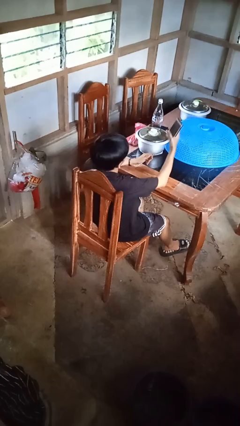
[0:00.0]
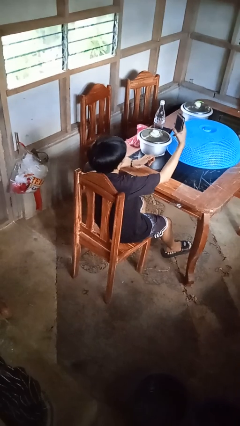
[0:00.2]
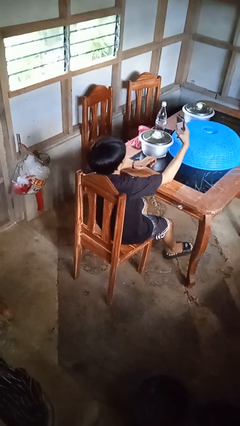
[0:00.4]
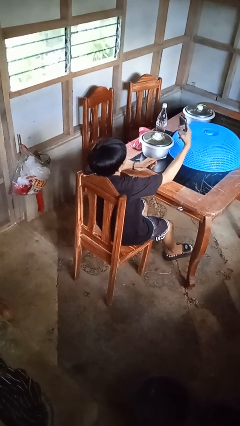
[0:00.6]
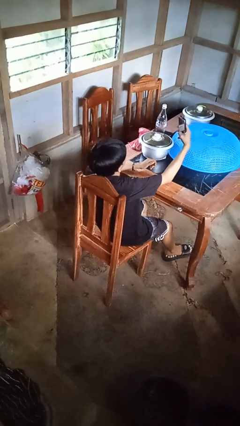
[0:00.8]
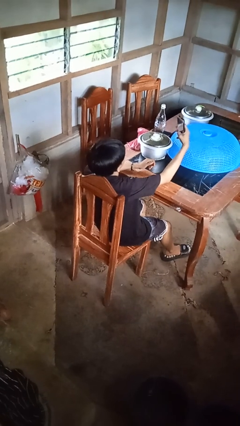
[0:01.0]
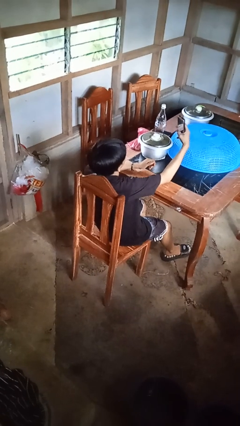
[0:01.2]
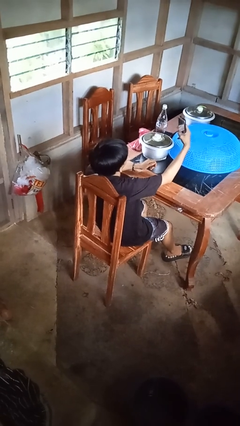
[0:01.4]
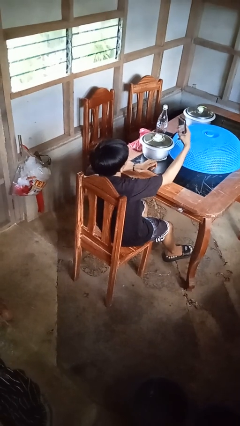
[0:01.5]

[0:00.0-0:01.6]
person takes selfie

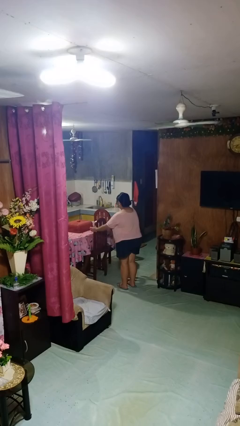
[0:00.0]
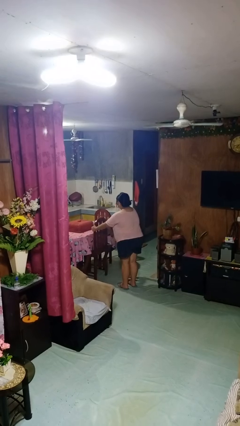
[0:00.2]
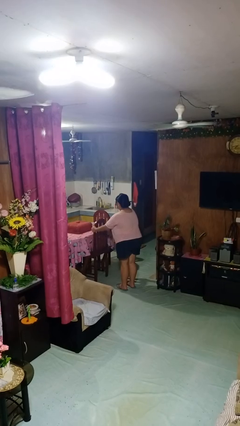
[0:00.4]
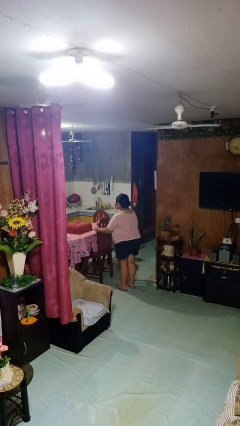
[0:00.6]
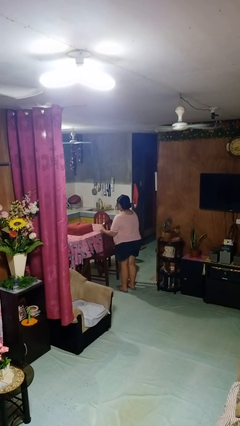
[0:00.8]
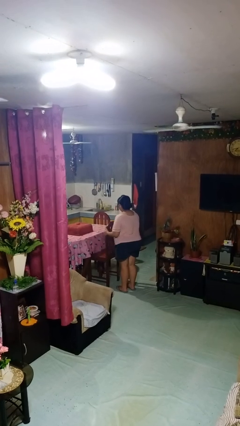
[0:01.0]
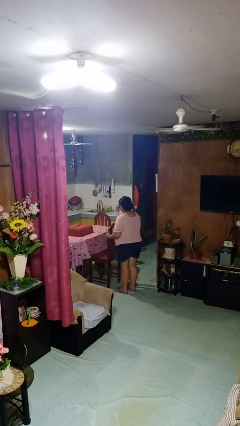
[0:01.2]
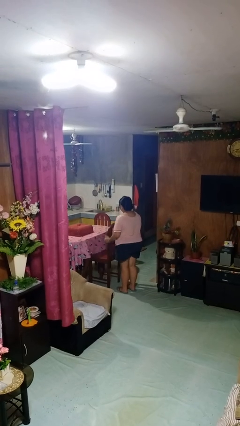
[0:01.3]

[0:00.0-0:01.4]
person pulls out chair

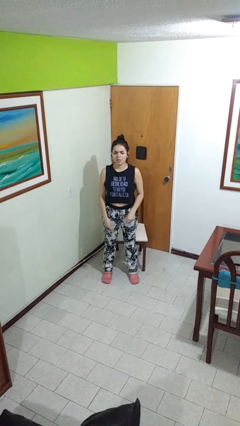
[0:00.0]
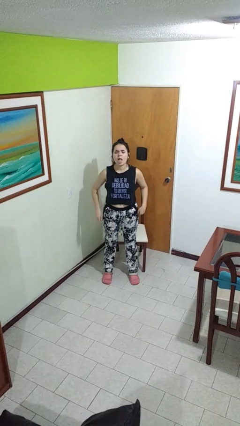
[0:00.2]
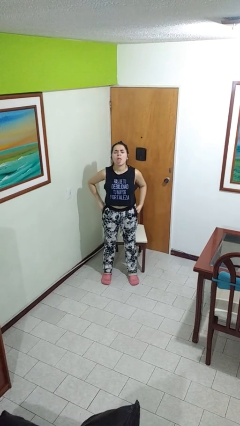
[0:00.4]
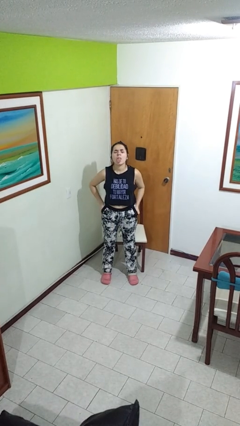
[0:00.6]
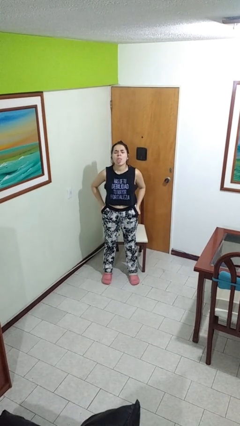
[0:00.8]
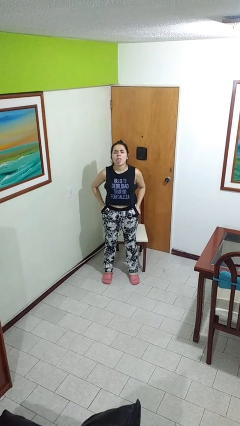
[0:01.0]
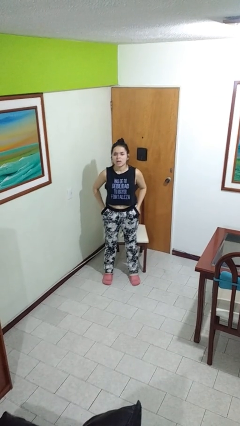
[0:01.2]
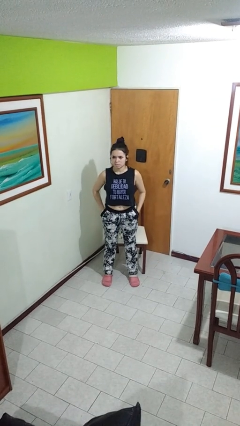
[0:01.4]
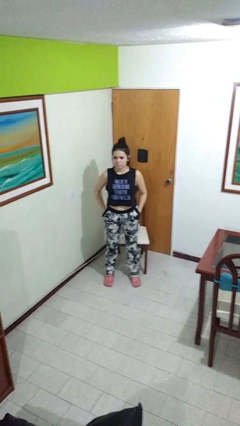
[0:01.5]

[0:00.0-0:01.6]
person sticks out tongue

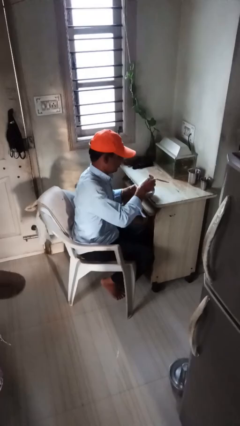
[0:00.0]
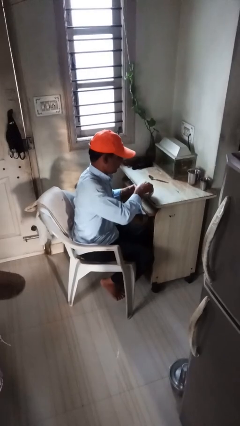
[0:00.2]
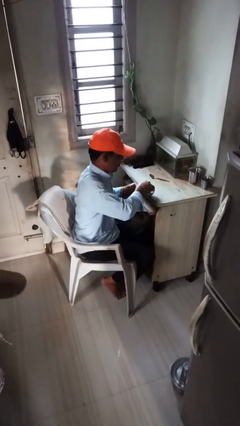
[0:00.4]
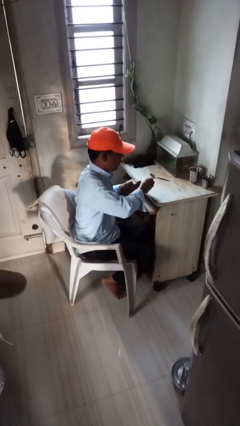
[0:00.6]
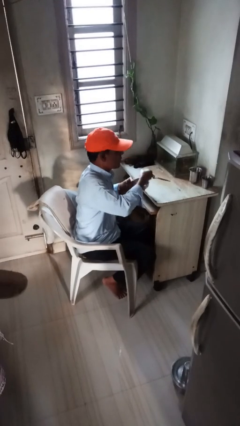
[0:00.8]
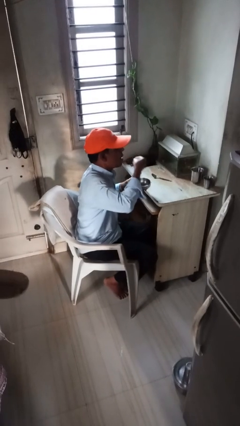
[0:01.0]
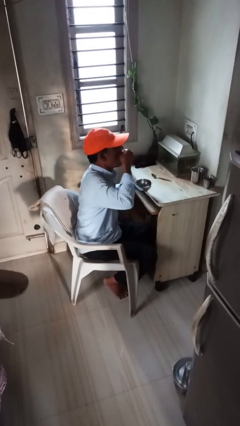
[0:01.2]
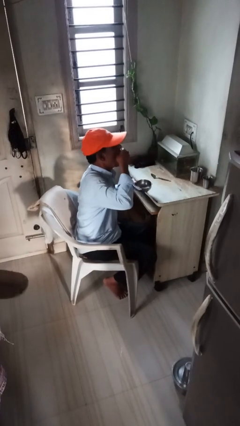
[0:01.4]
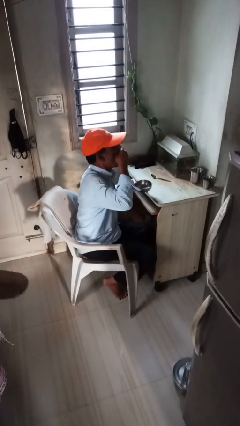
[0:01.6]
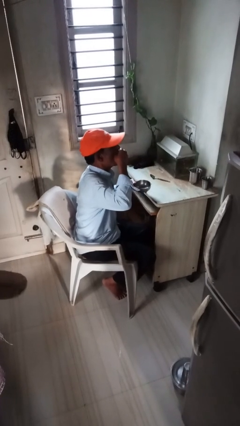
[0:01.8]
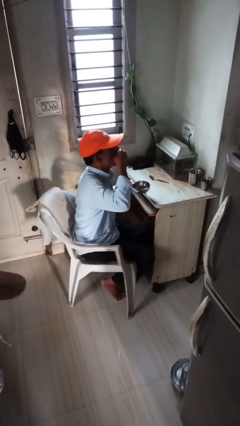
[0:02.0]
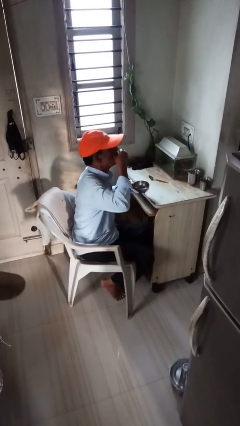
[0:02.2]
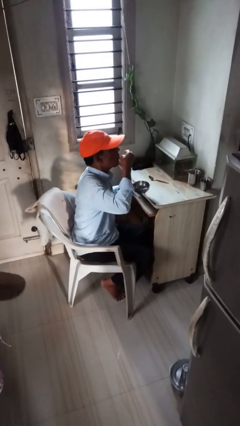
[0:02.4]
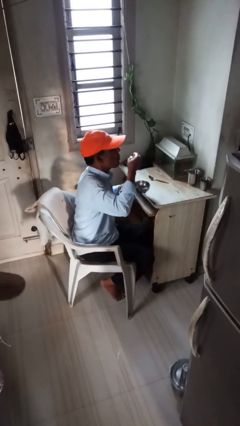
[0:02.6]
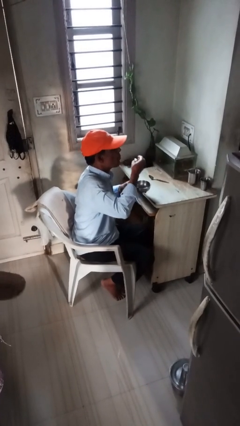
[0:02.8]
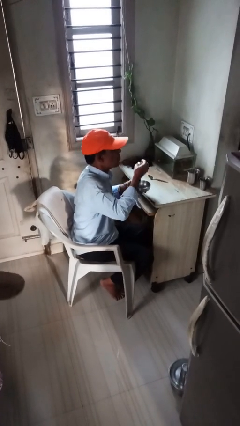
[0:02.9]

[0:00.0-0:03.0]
person eats with hands

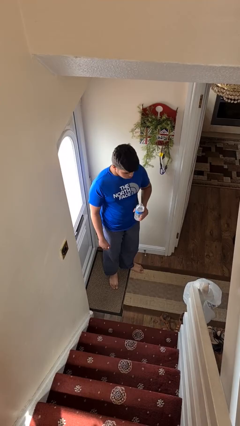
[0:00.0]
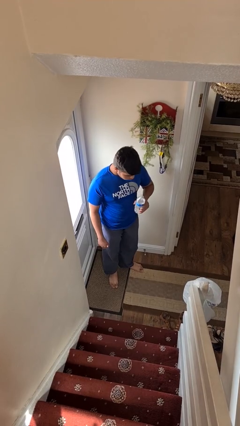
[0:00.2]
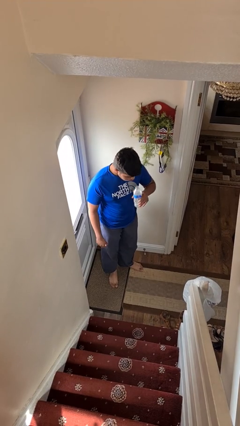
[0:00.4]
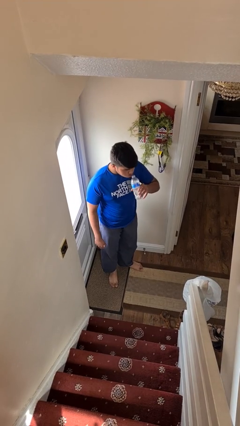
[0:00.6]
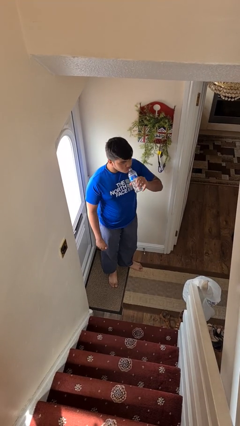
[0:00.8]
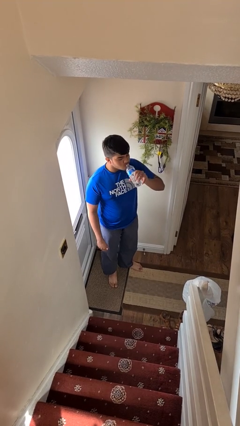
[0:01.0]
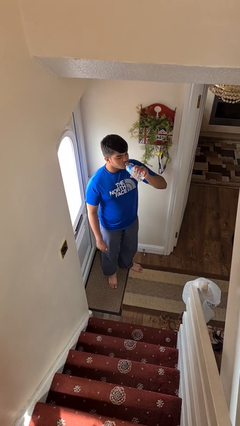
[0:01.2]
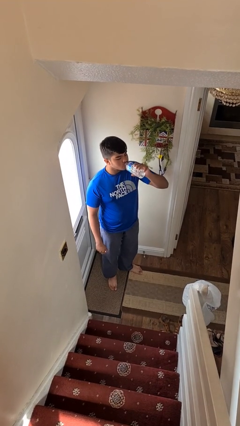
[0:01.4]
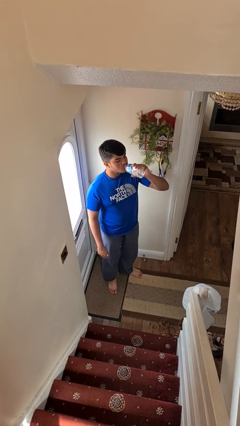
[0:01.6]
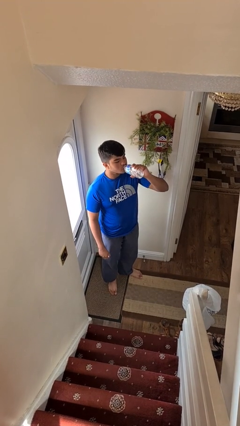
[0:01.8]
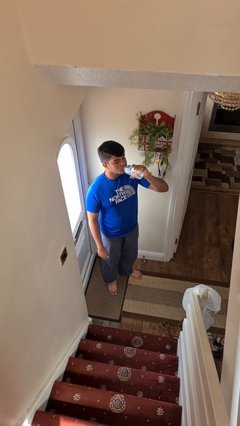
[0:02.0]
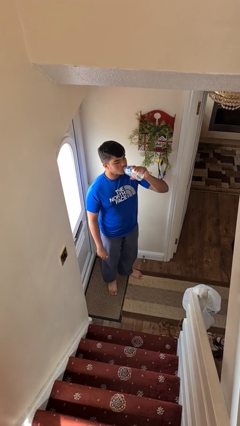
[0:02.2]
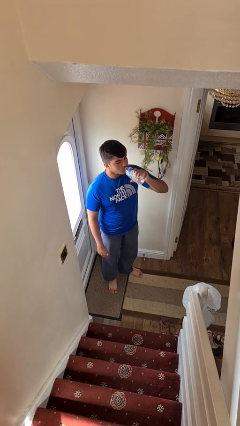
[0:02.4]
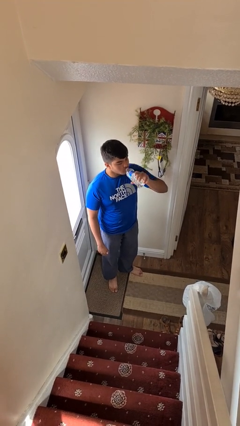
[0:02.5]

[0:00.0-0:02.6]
person drinks from bottle

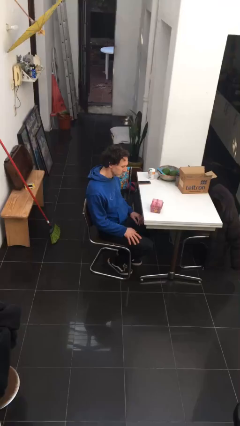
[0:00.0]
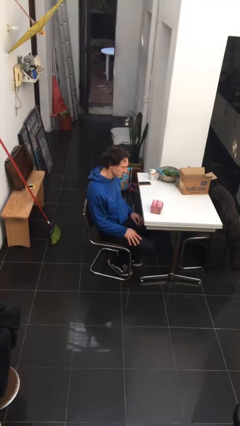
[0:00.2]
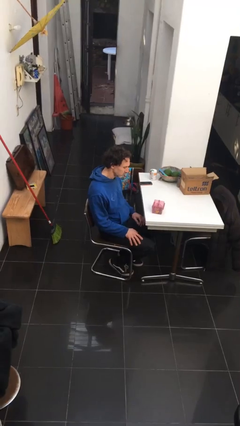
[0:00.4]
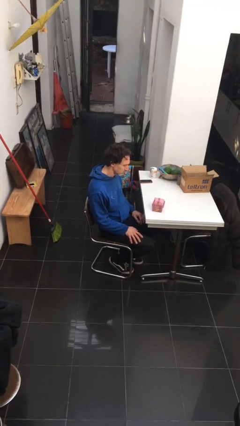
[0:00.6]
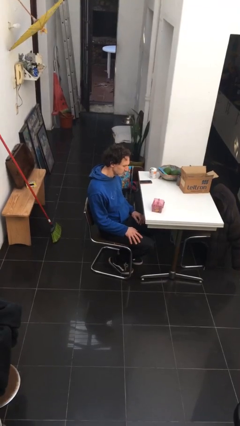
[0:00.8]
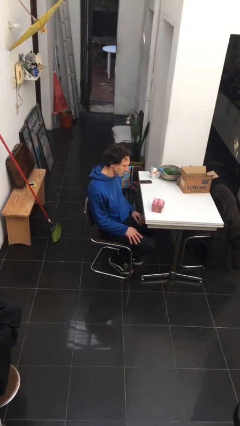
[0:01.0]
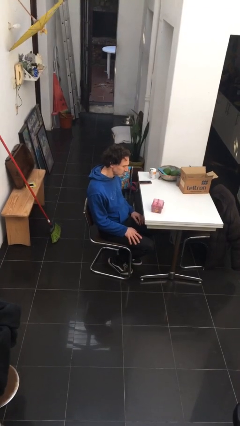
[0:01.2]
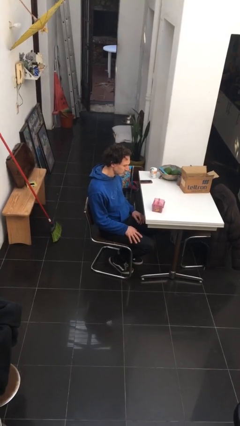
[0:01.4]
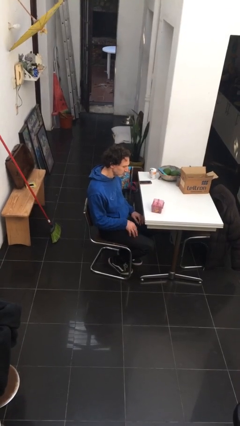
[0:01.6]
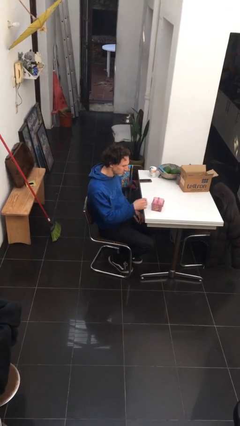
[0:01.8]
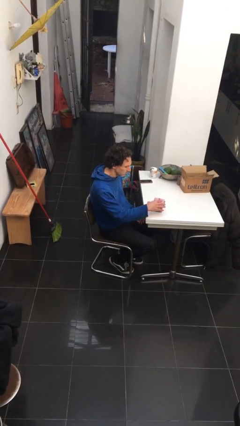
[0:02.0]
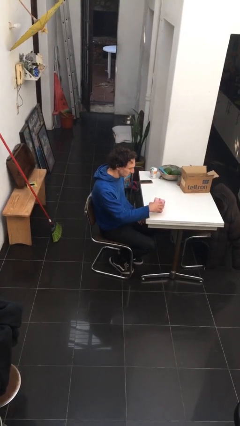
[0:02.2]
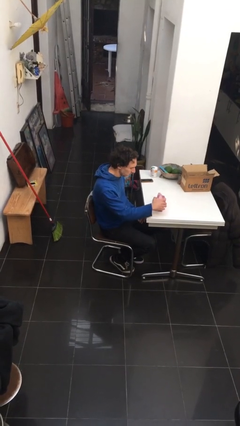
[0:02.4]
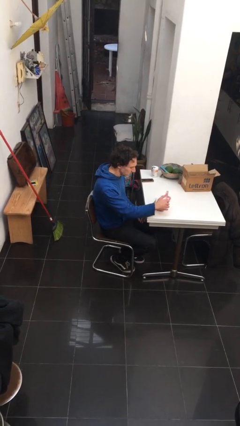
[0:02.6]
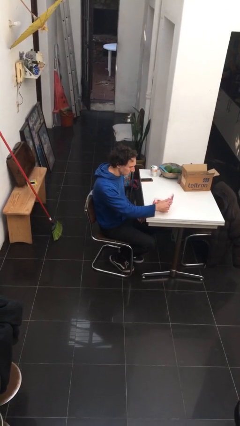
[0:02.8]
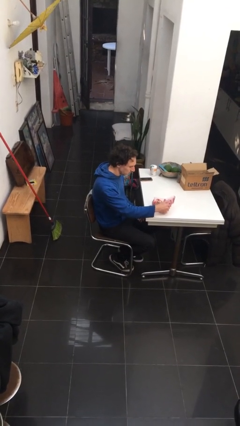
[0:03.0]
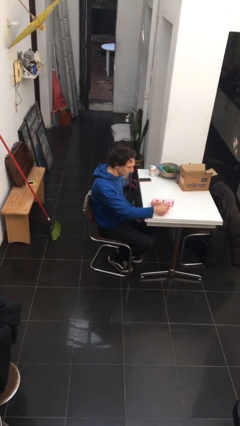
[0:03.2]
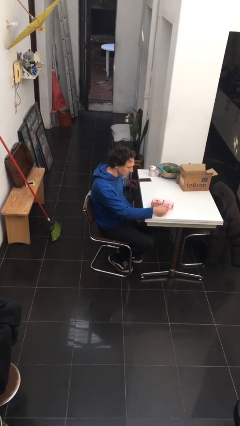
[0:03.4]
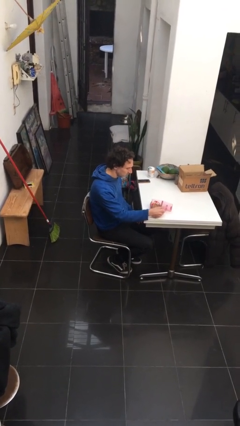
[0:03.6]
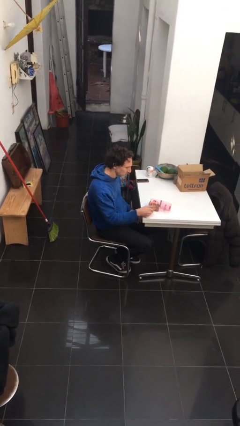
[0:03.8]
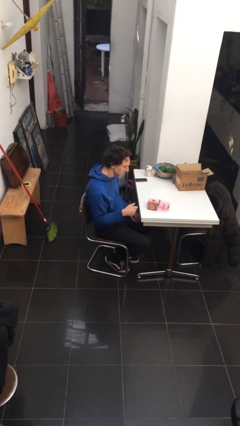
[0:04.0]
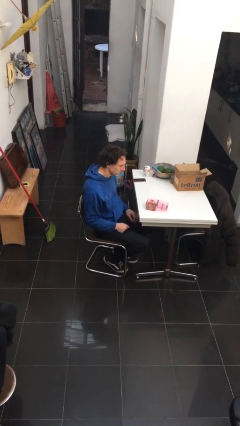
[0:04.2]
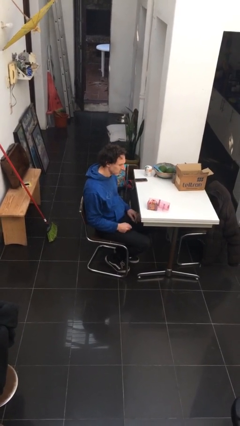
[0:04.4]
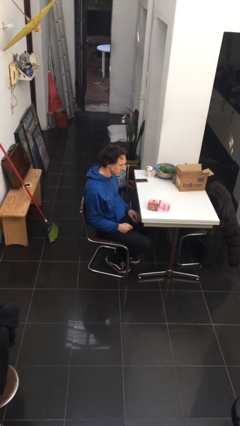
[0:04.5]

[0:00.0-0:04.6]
person opens jewelry box

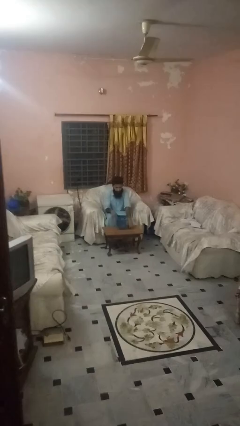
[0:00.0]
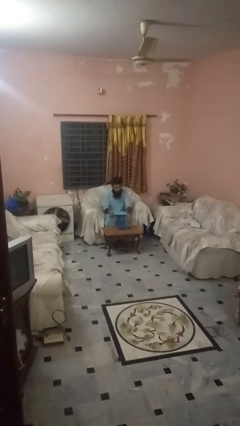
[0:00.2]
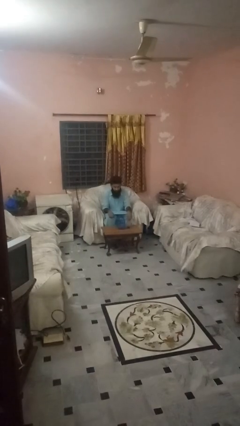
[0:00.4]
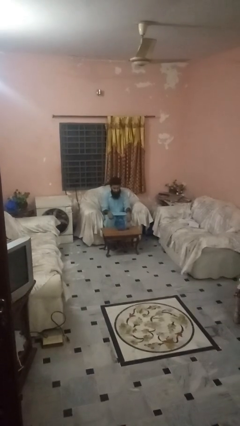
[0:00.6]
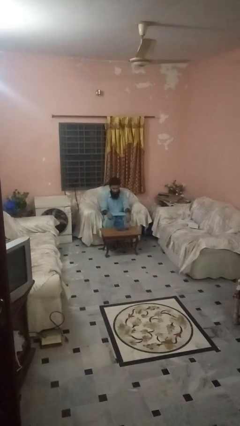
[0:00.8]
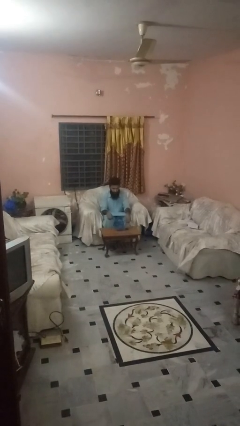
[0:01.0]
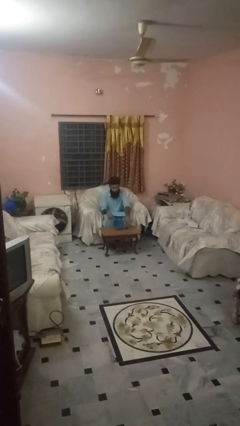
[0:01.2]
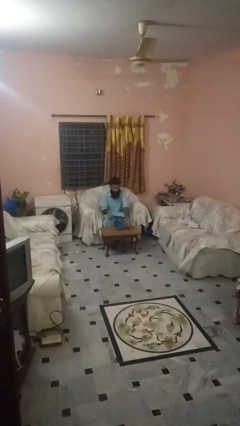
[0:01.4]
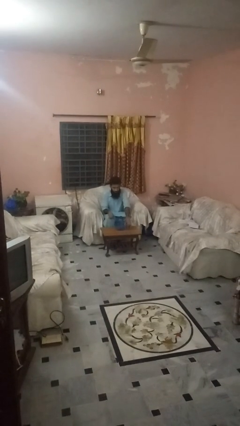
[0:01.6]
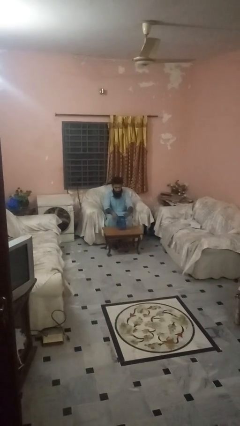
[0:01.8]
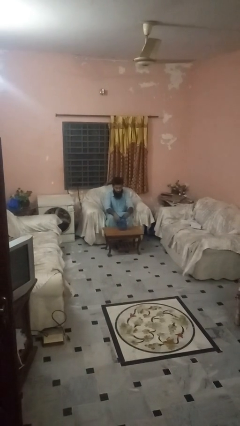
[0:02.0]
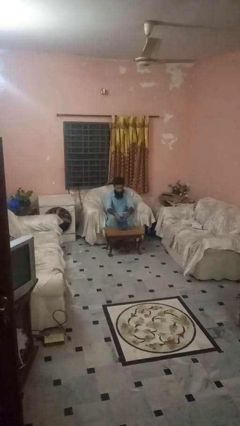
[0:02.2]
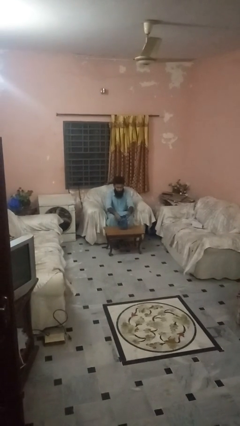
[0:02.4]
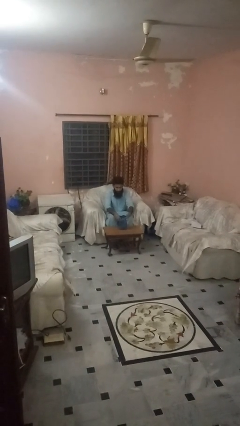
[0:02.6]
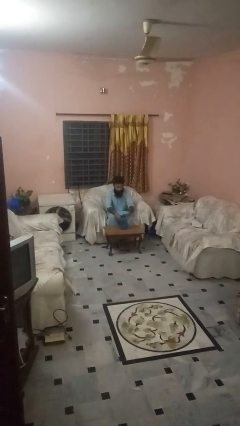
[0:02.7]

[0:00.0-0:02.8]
person screws lid to bottle
